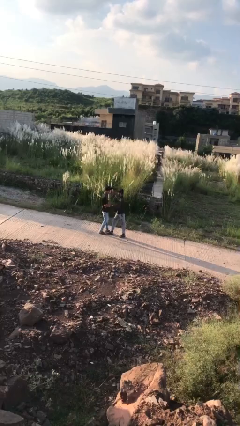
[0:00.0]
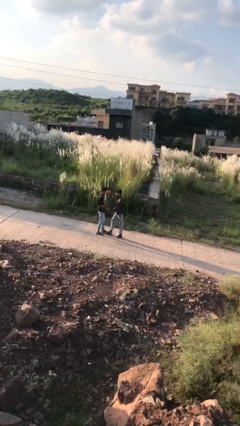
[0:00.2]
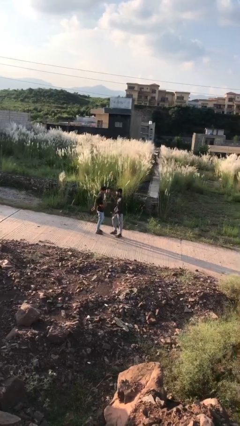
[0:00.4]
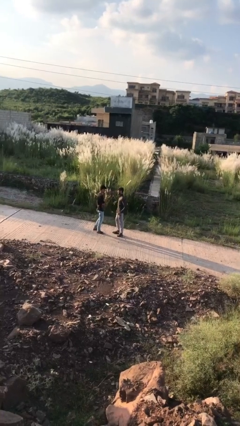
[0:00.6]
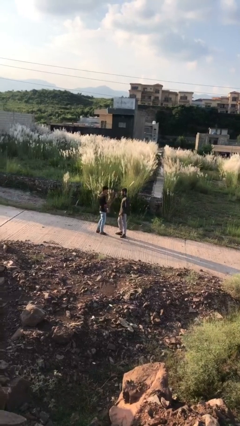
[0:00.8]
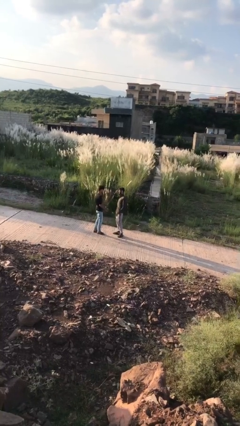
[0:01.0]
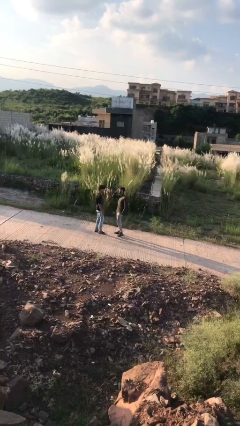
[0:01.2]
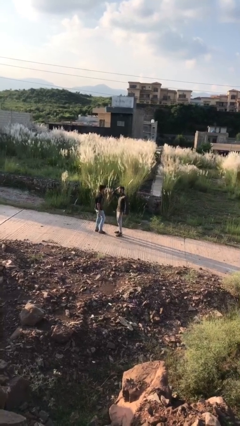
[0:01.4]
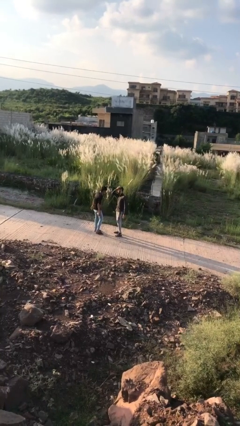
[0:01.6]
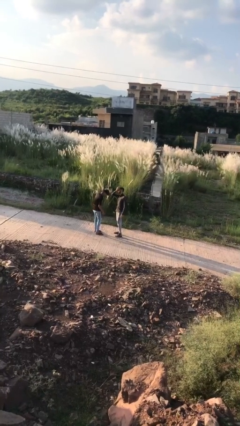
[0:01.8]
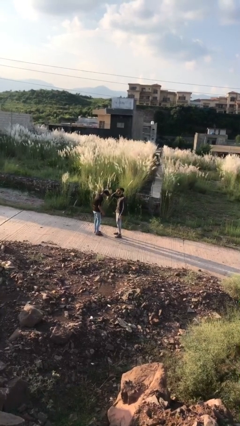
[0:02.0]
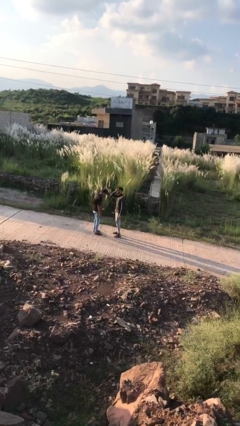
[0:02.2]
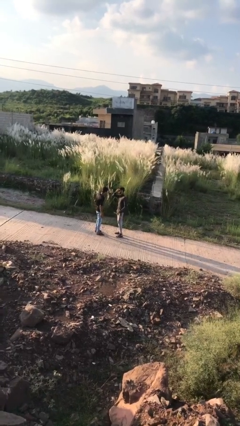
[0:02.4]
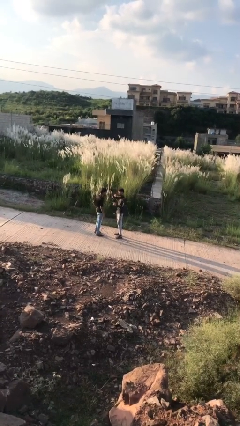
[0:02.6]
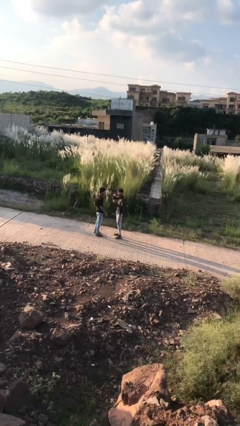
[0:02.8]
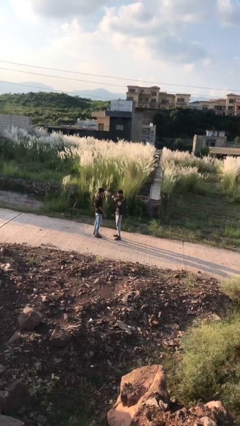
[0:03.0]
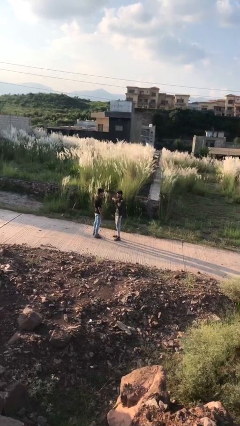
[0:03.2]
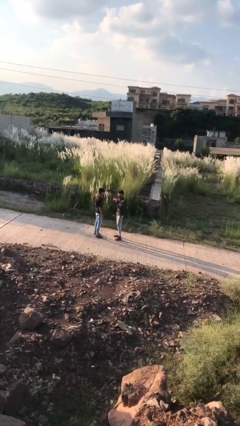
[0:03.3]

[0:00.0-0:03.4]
person talks to person

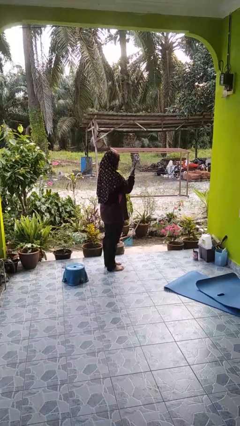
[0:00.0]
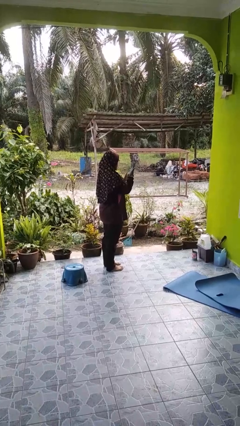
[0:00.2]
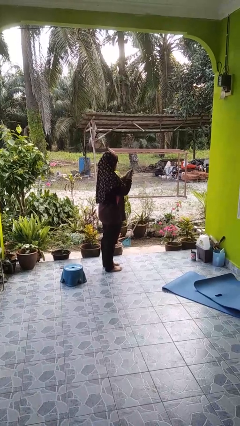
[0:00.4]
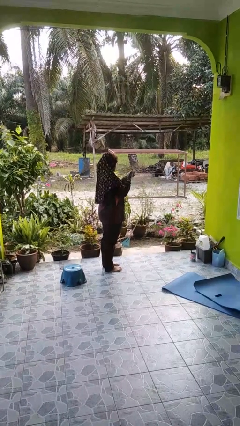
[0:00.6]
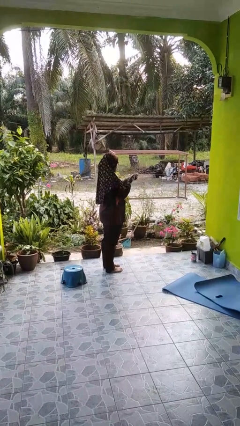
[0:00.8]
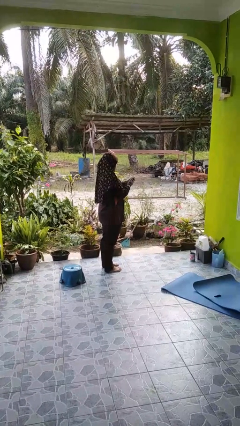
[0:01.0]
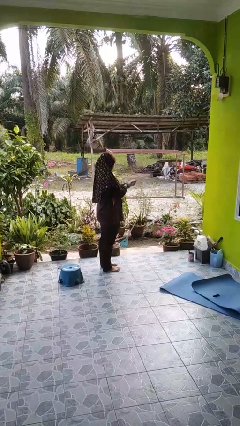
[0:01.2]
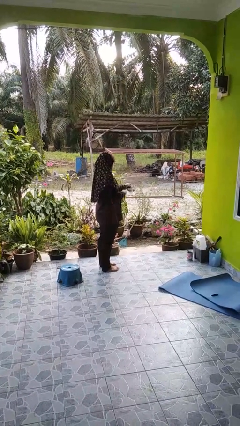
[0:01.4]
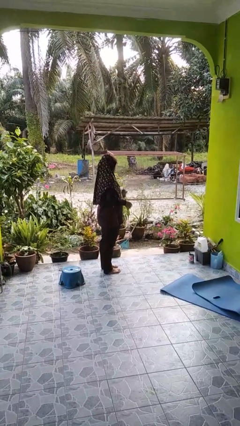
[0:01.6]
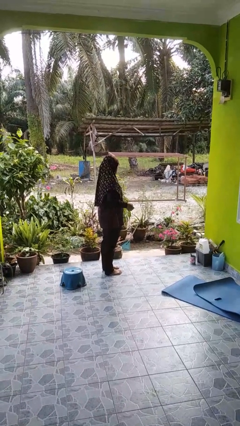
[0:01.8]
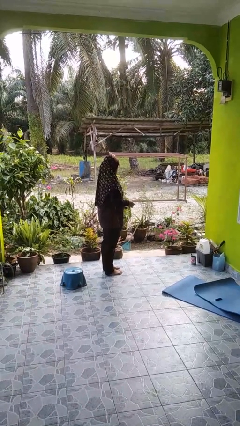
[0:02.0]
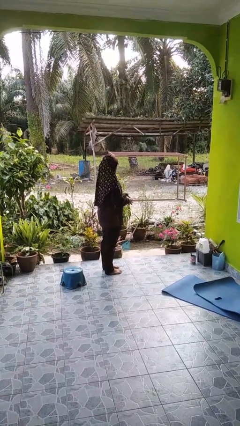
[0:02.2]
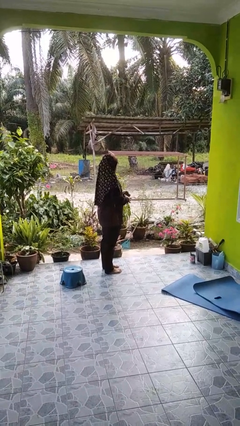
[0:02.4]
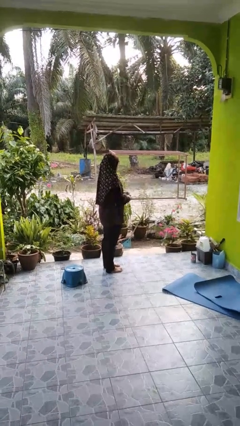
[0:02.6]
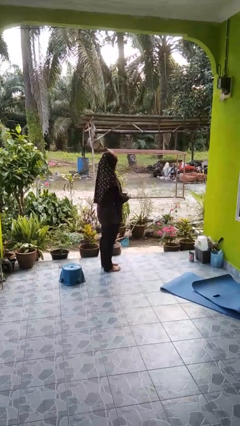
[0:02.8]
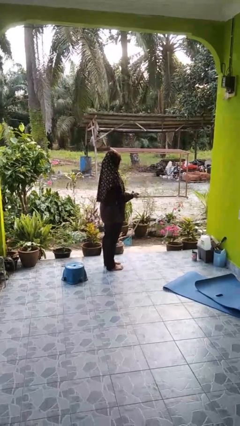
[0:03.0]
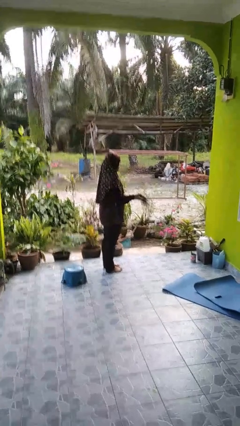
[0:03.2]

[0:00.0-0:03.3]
person takes off gloves

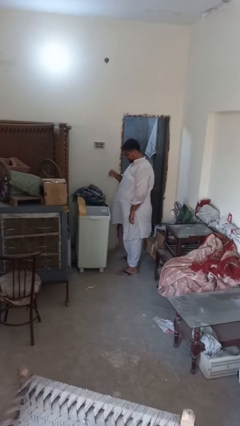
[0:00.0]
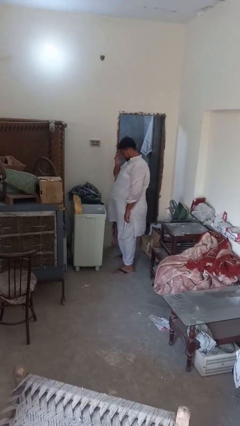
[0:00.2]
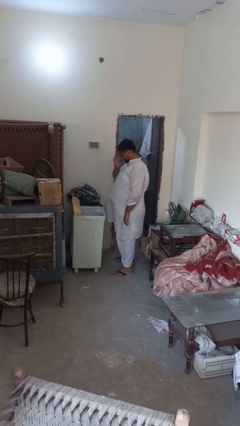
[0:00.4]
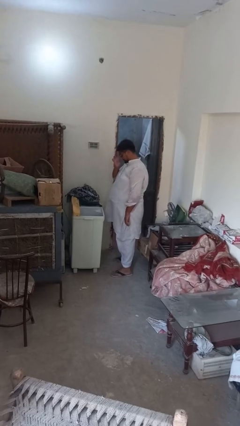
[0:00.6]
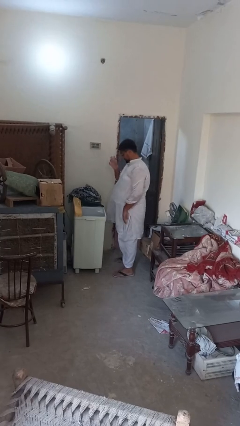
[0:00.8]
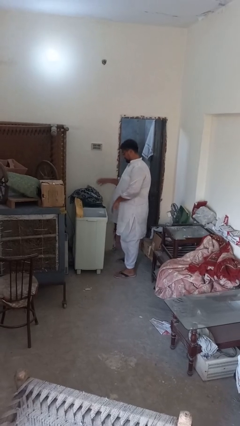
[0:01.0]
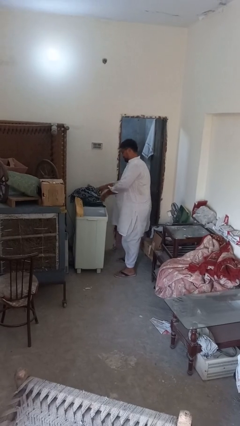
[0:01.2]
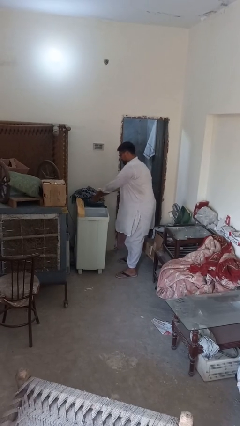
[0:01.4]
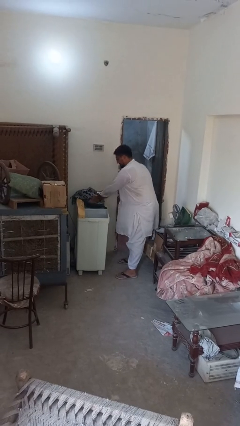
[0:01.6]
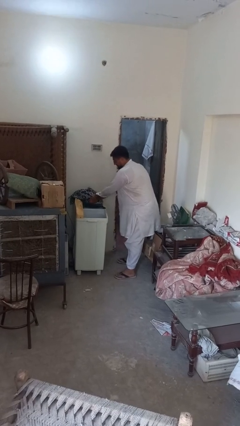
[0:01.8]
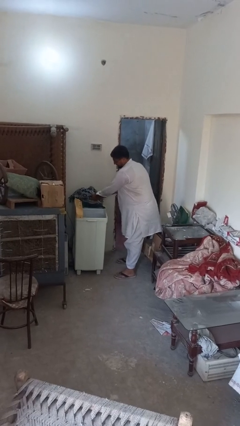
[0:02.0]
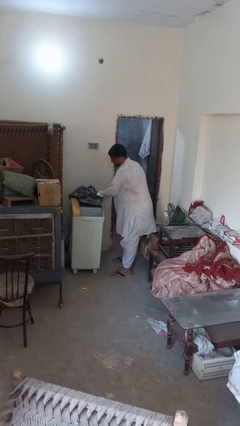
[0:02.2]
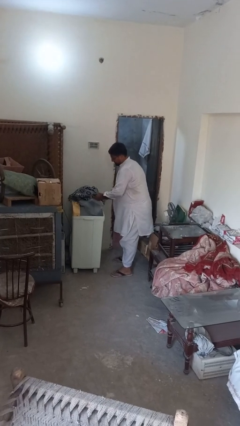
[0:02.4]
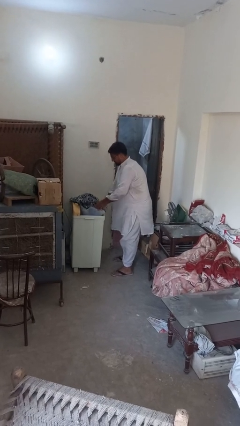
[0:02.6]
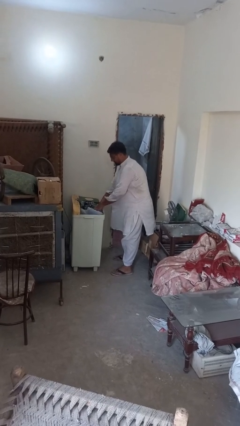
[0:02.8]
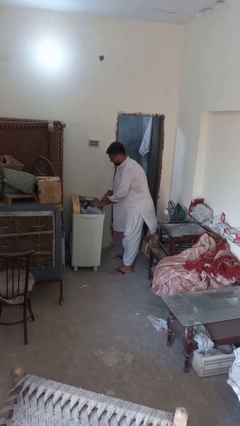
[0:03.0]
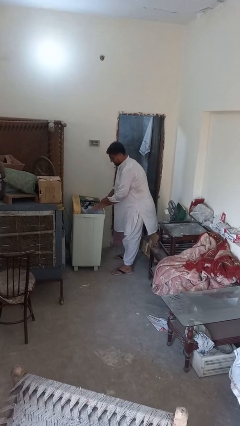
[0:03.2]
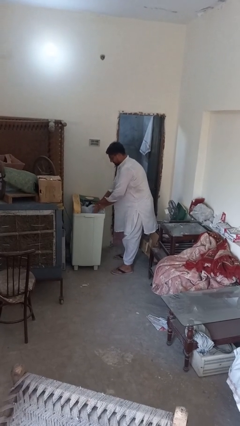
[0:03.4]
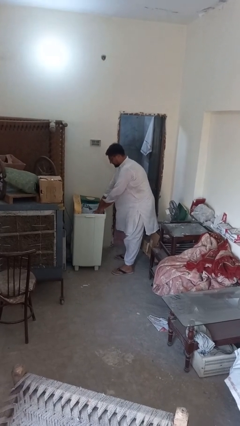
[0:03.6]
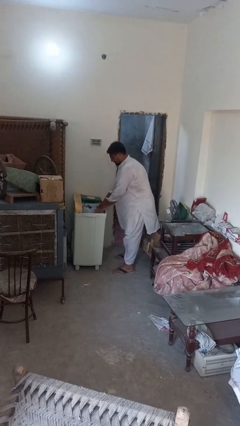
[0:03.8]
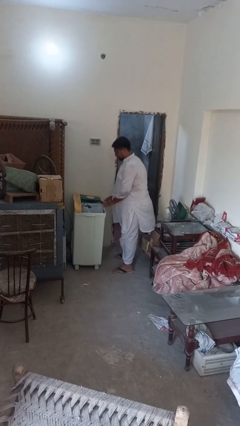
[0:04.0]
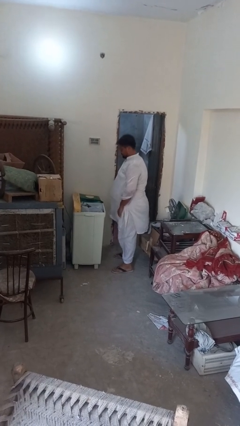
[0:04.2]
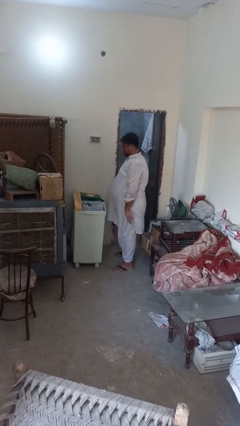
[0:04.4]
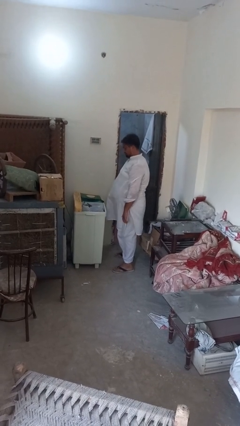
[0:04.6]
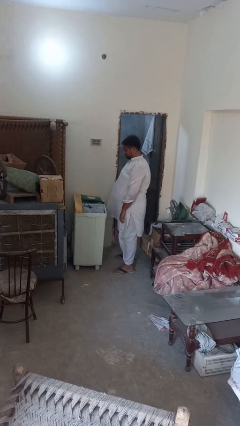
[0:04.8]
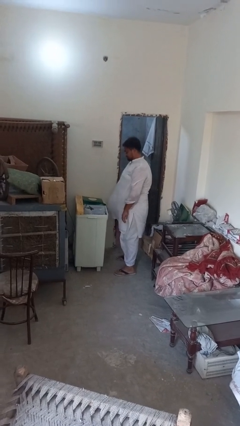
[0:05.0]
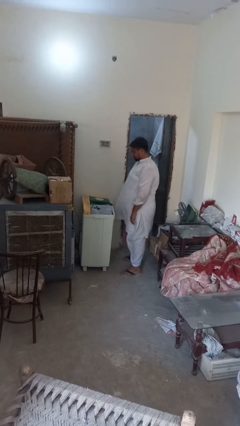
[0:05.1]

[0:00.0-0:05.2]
person loads clotheswasher

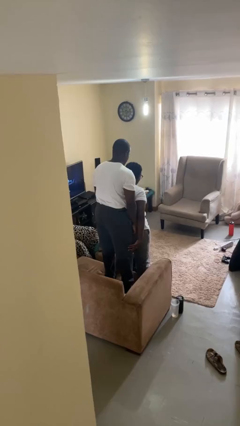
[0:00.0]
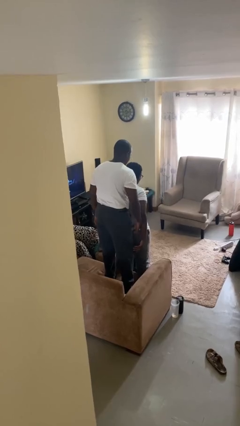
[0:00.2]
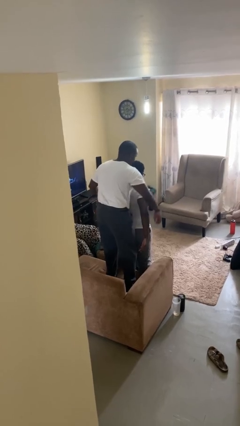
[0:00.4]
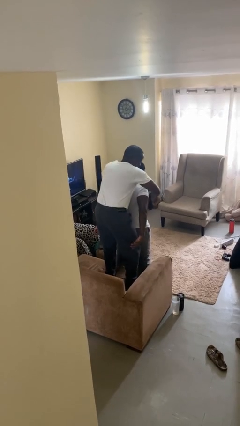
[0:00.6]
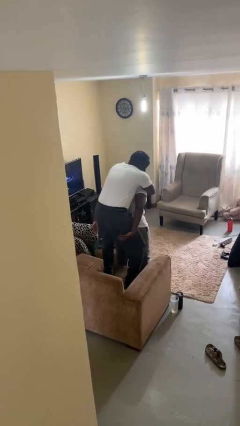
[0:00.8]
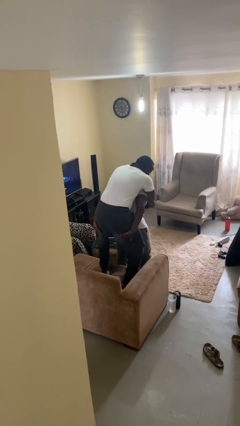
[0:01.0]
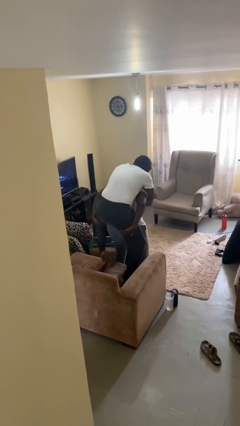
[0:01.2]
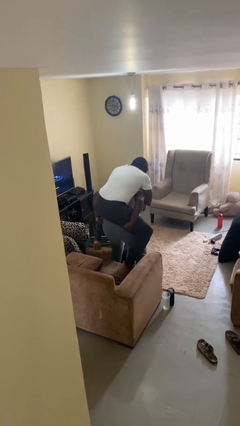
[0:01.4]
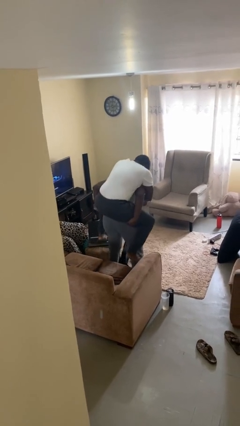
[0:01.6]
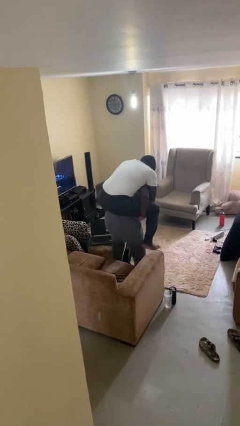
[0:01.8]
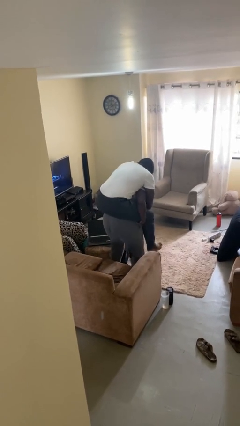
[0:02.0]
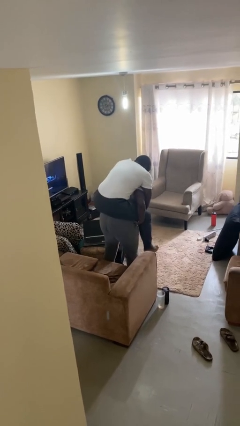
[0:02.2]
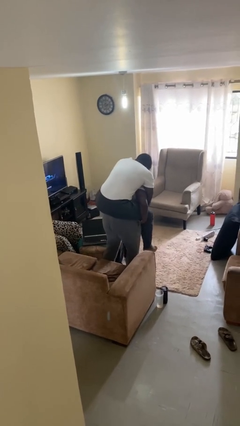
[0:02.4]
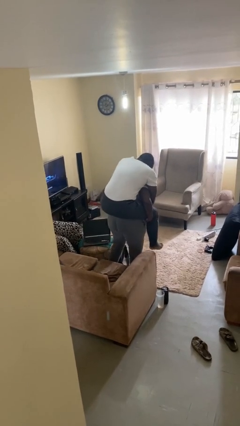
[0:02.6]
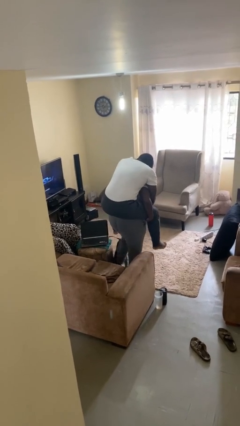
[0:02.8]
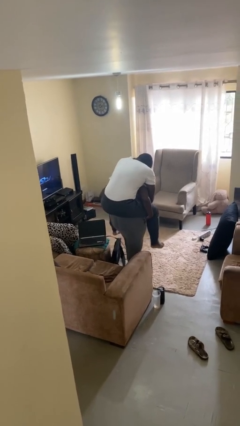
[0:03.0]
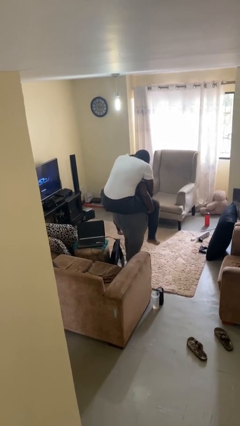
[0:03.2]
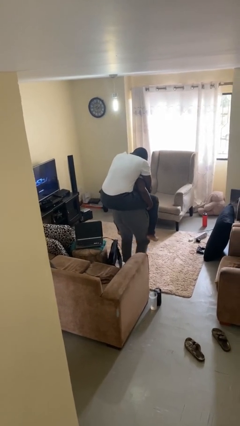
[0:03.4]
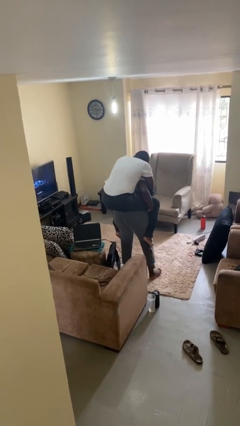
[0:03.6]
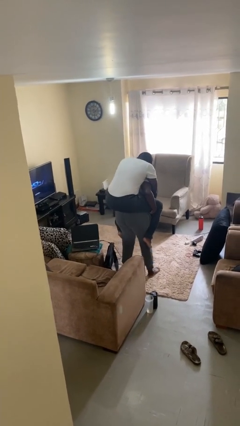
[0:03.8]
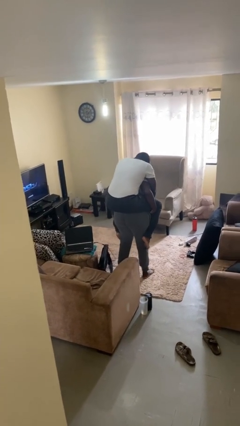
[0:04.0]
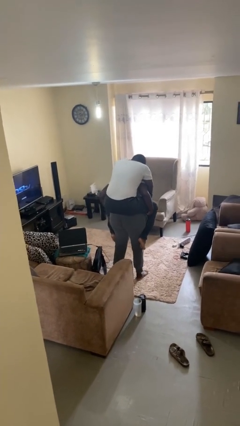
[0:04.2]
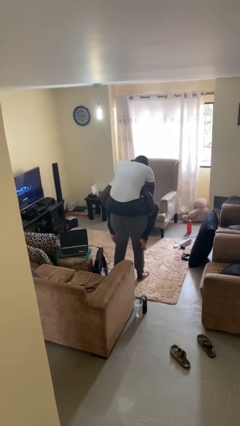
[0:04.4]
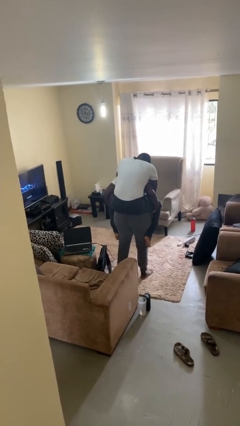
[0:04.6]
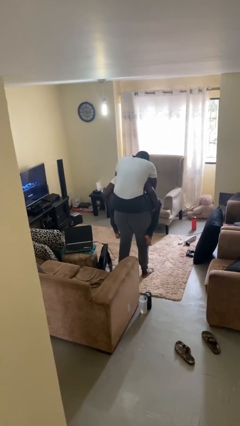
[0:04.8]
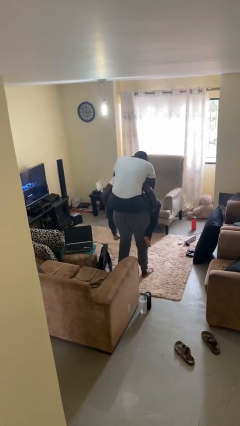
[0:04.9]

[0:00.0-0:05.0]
person carries person on back

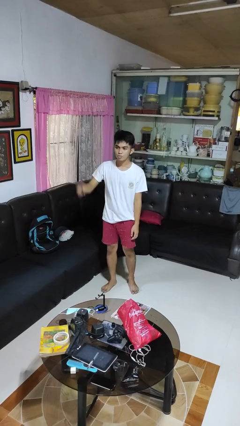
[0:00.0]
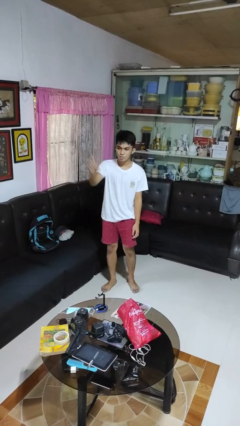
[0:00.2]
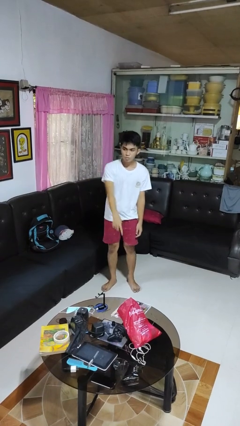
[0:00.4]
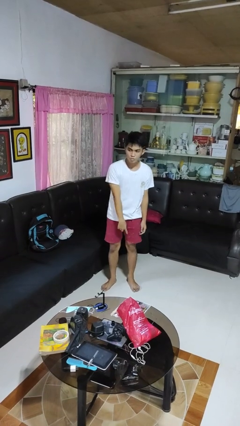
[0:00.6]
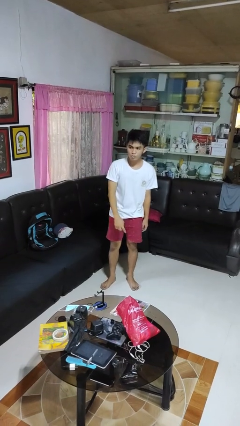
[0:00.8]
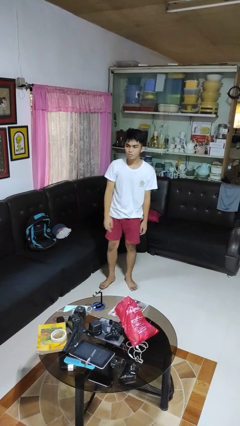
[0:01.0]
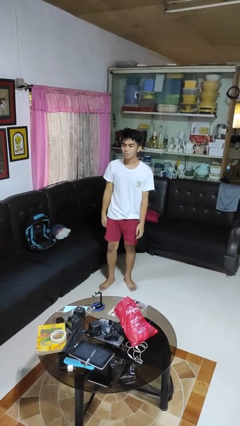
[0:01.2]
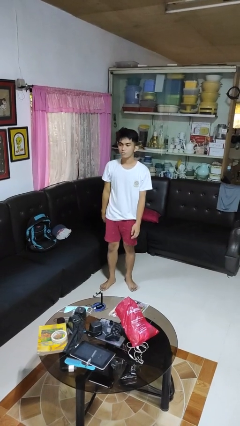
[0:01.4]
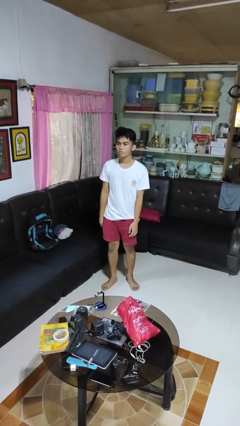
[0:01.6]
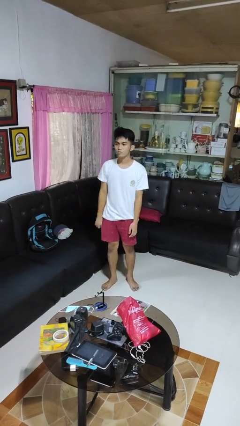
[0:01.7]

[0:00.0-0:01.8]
person gestures swipe down
